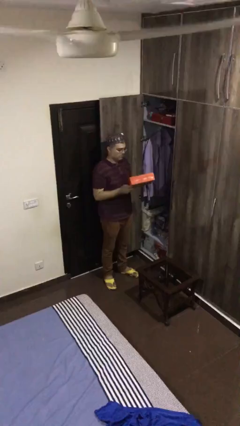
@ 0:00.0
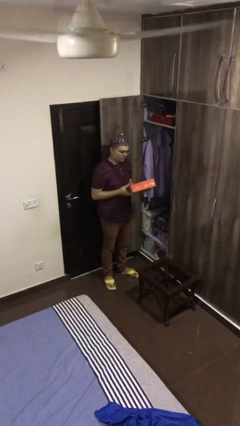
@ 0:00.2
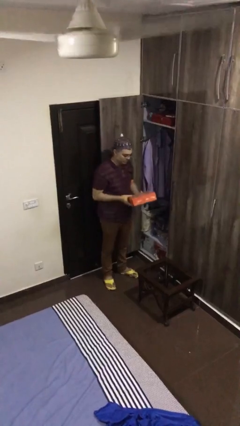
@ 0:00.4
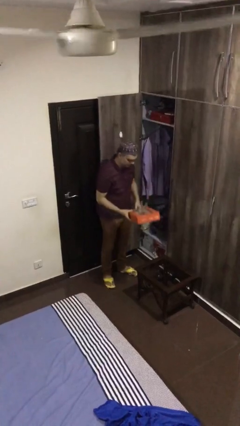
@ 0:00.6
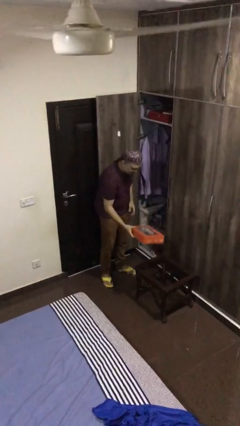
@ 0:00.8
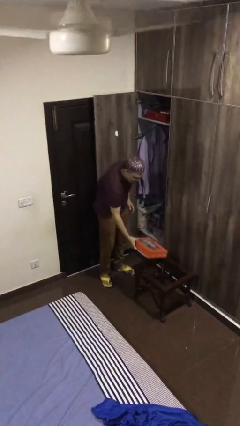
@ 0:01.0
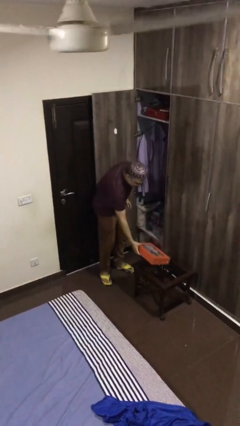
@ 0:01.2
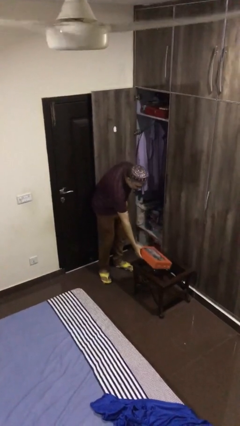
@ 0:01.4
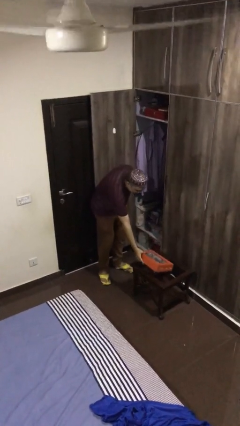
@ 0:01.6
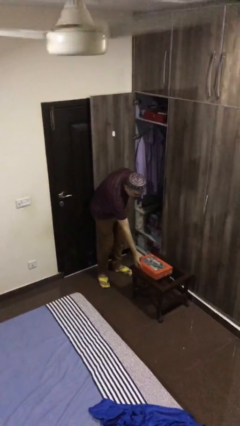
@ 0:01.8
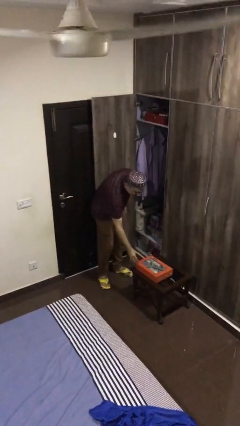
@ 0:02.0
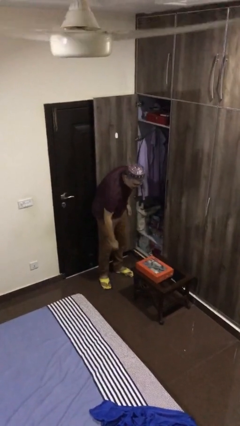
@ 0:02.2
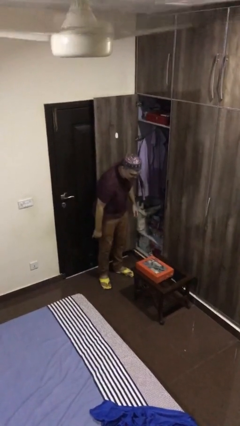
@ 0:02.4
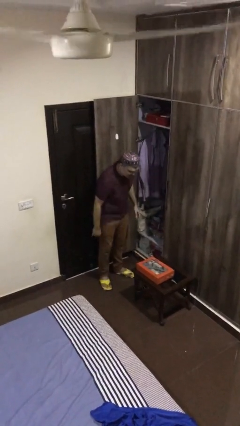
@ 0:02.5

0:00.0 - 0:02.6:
person puts down object on table

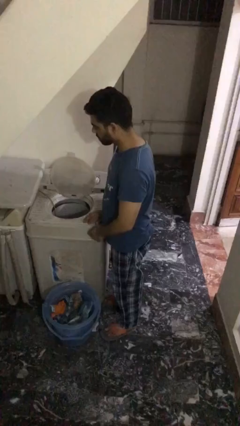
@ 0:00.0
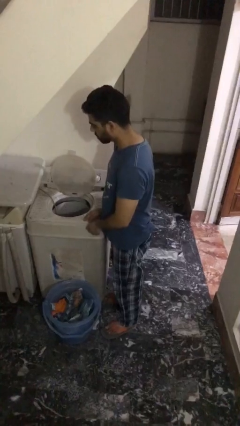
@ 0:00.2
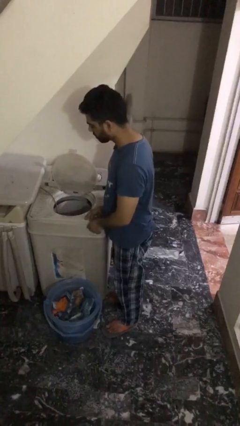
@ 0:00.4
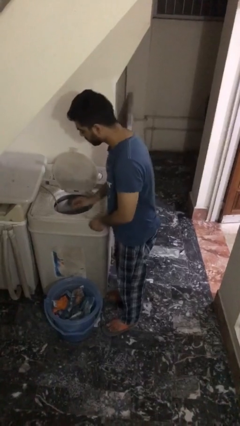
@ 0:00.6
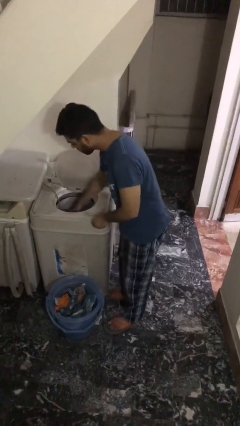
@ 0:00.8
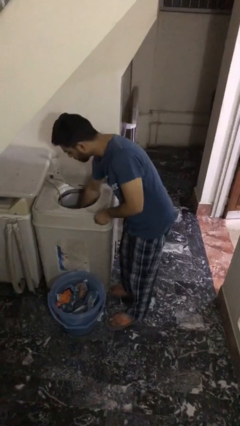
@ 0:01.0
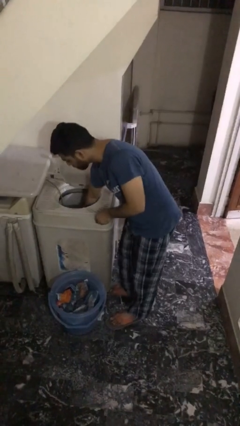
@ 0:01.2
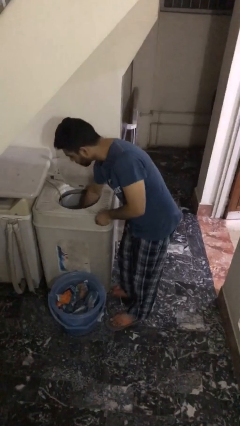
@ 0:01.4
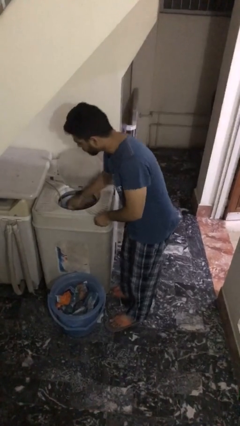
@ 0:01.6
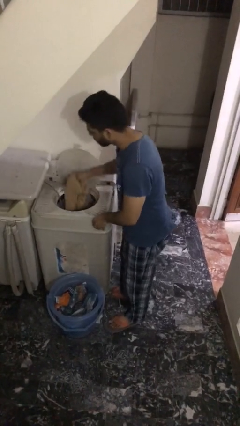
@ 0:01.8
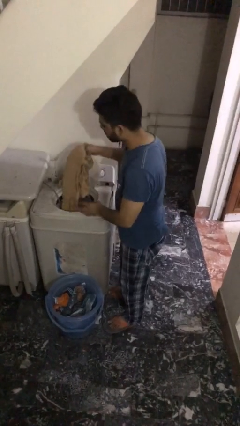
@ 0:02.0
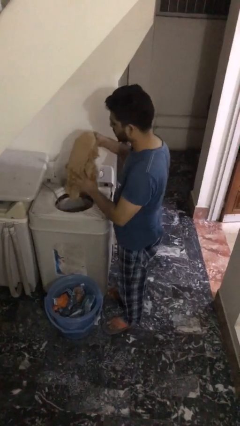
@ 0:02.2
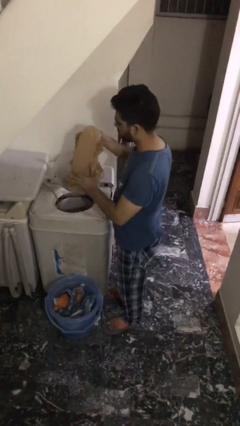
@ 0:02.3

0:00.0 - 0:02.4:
person unloads clotheswasher

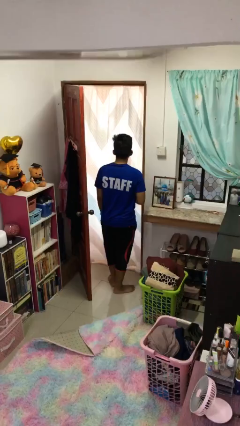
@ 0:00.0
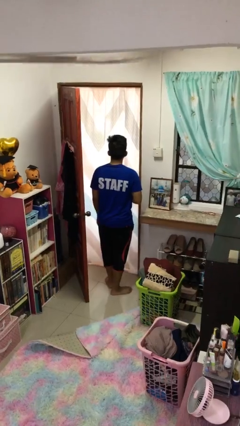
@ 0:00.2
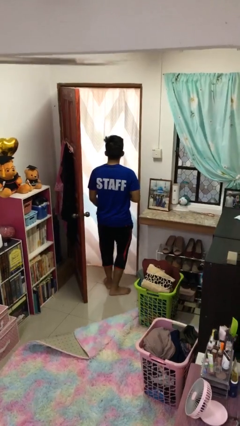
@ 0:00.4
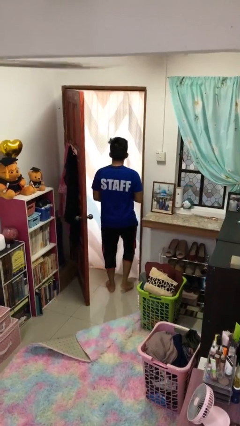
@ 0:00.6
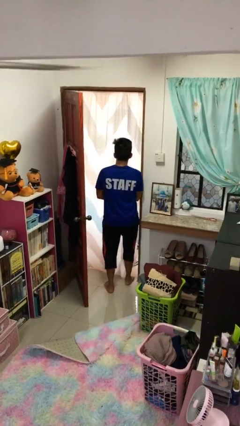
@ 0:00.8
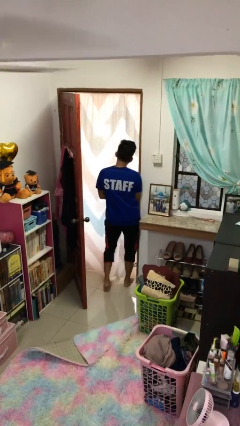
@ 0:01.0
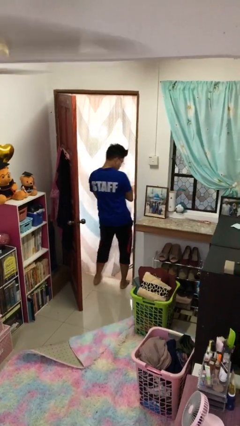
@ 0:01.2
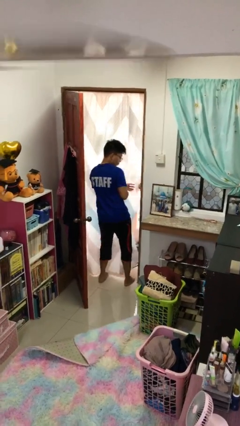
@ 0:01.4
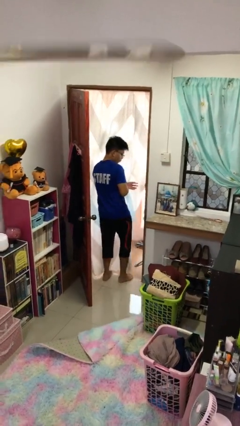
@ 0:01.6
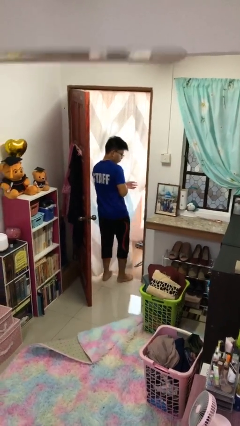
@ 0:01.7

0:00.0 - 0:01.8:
person bumps into wall

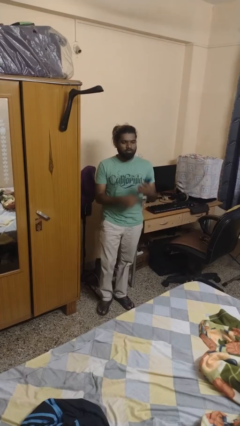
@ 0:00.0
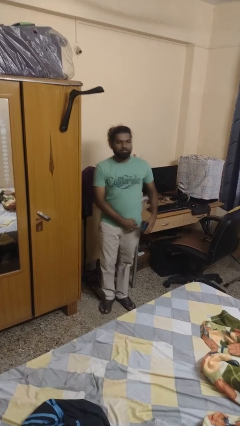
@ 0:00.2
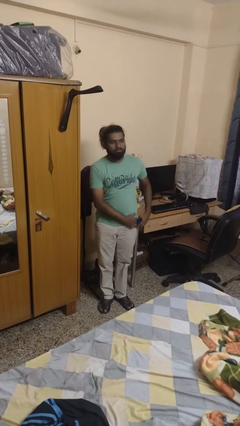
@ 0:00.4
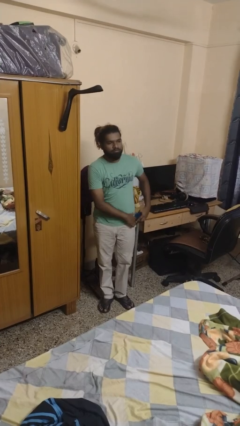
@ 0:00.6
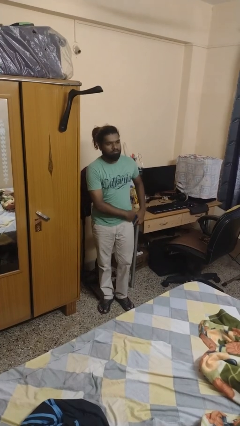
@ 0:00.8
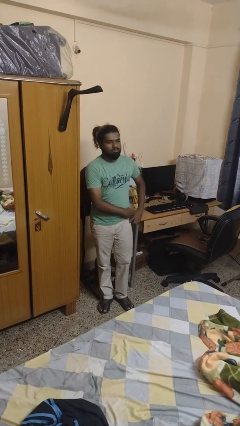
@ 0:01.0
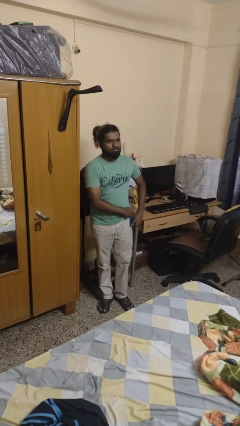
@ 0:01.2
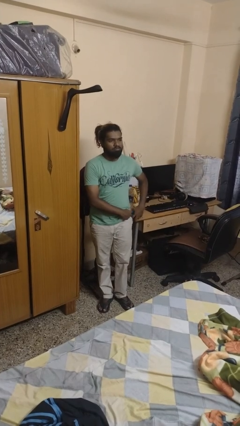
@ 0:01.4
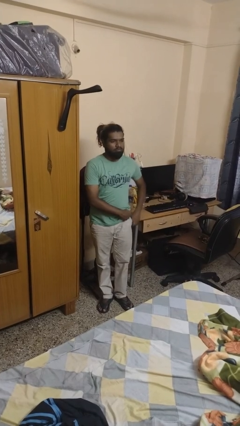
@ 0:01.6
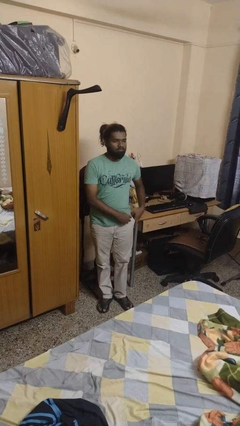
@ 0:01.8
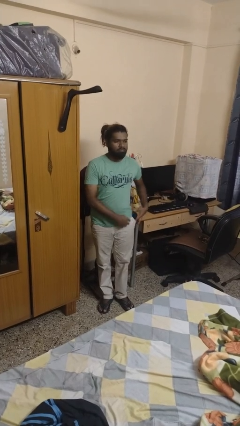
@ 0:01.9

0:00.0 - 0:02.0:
person puts phone into pocket

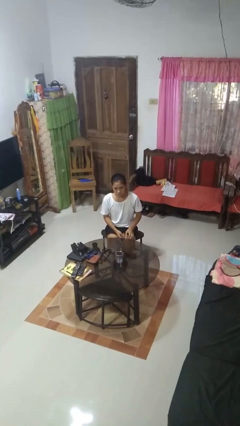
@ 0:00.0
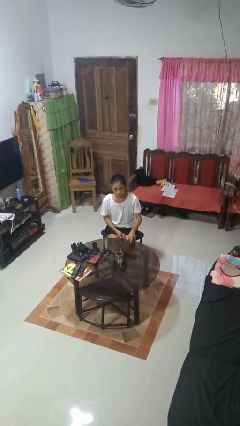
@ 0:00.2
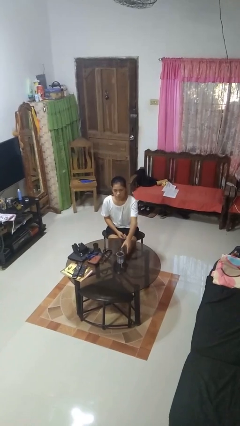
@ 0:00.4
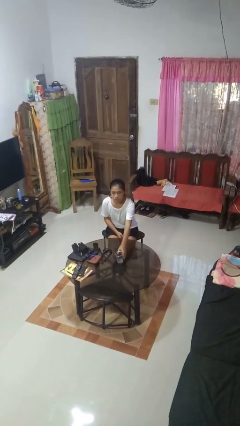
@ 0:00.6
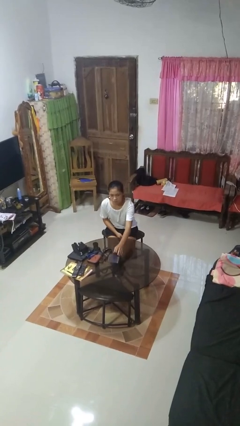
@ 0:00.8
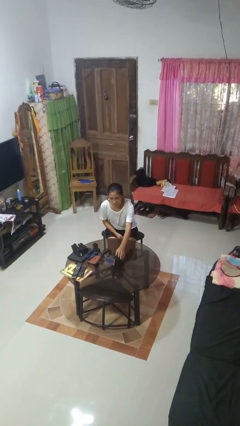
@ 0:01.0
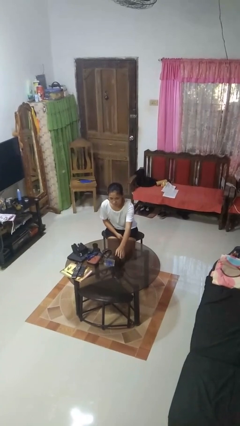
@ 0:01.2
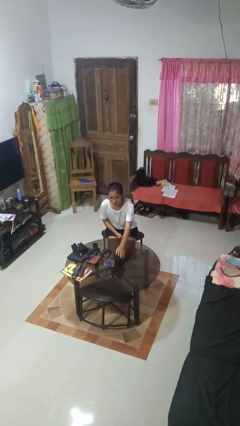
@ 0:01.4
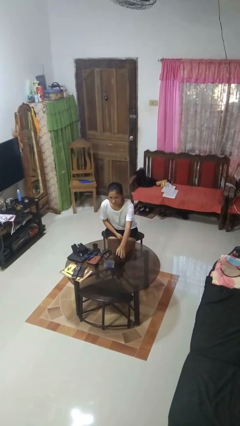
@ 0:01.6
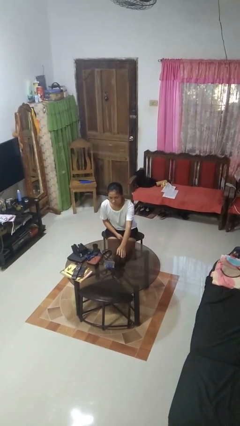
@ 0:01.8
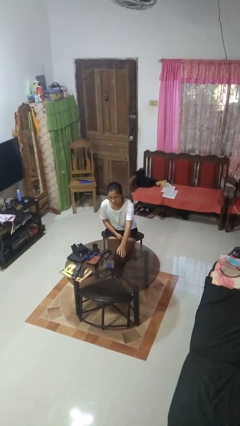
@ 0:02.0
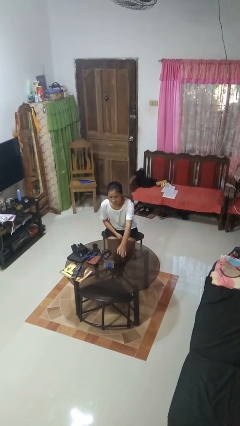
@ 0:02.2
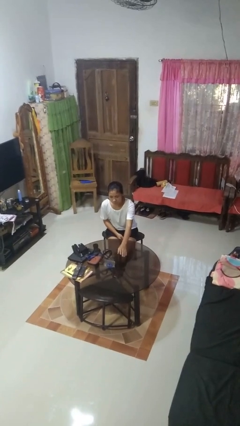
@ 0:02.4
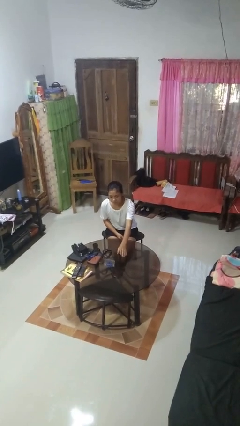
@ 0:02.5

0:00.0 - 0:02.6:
person knocks over glass

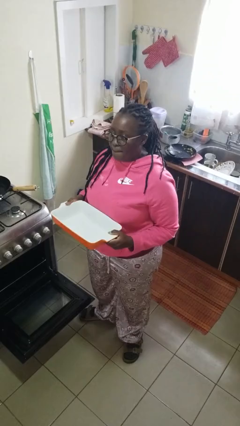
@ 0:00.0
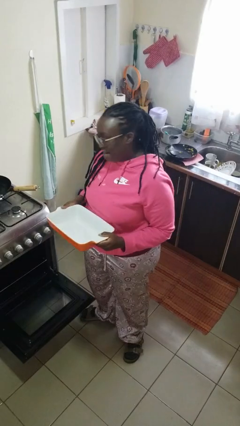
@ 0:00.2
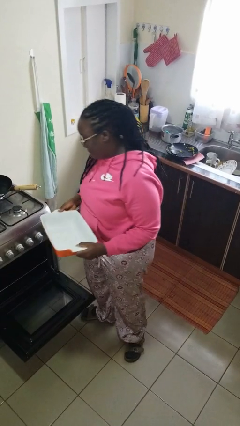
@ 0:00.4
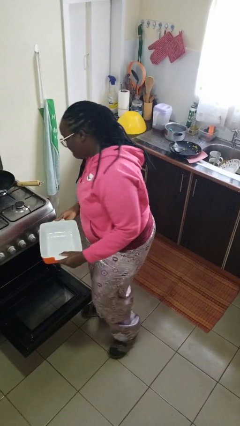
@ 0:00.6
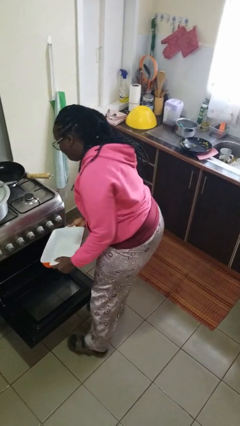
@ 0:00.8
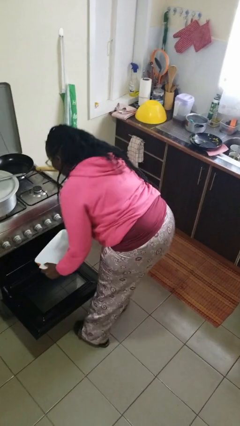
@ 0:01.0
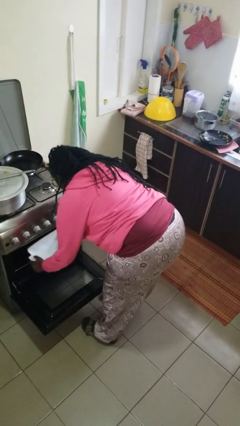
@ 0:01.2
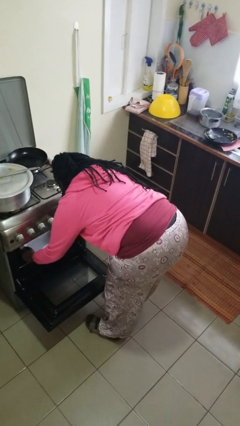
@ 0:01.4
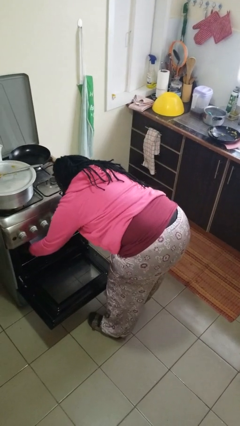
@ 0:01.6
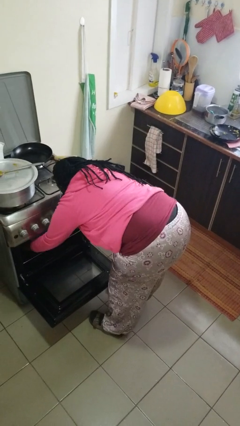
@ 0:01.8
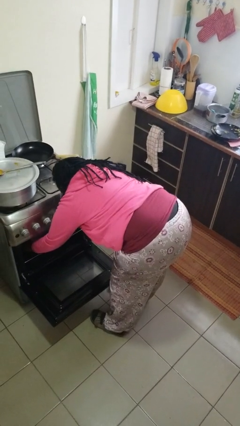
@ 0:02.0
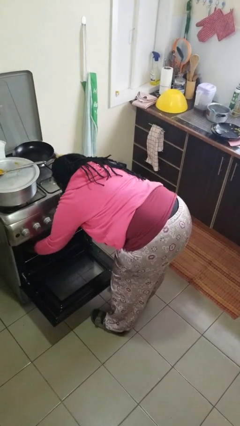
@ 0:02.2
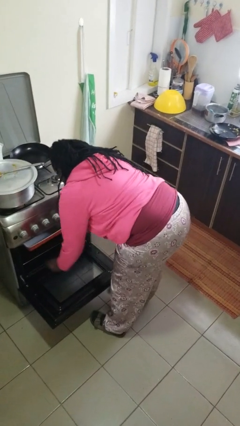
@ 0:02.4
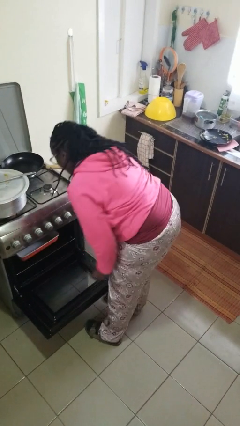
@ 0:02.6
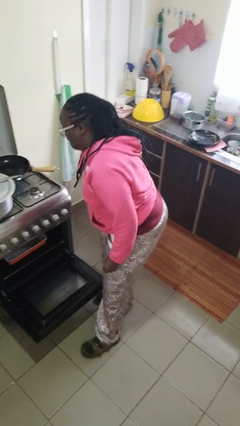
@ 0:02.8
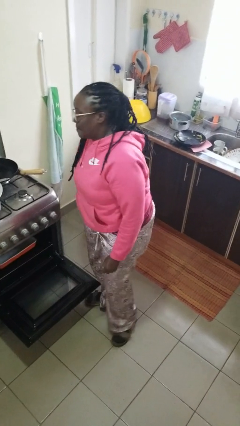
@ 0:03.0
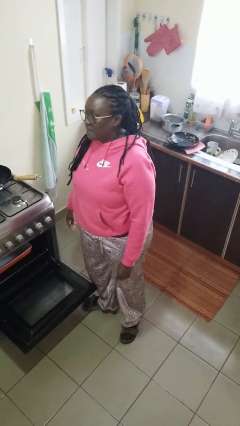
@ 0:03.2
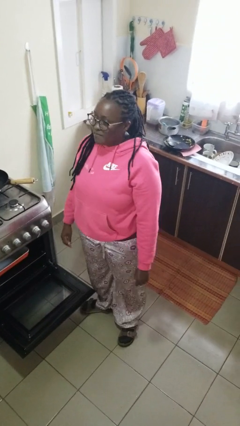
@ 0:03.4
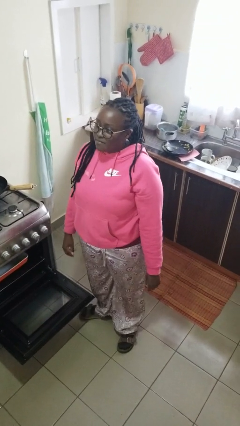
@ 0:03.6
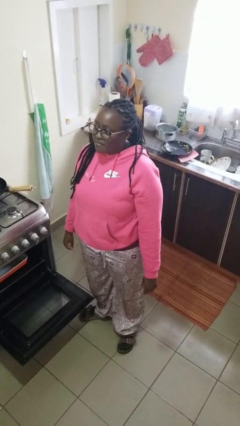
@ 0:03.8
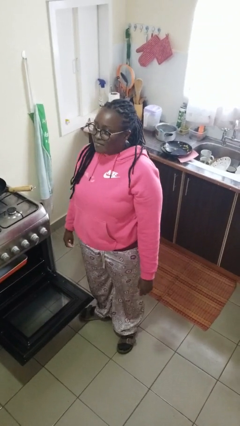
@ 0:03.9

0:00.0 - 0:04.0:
person puts object into oven

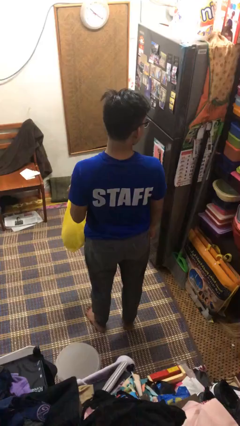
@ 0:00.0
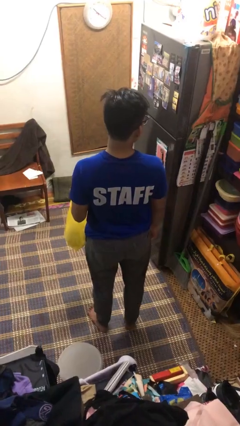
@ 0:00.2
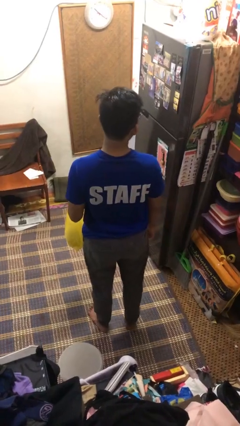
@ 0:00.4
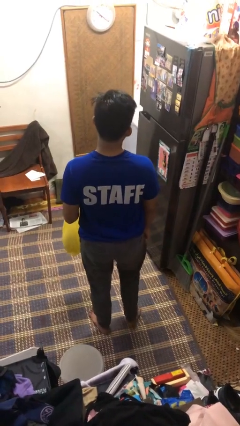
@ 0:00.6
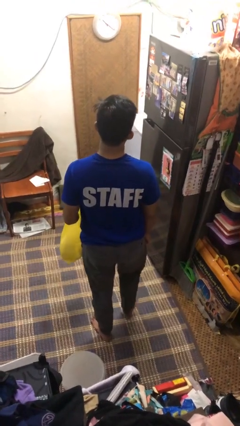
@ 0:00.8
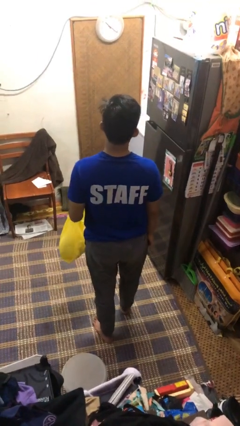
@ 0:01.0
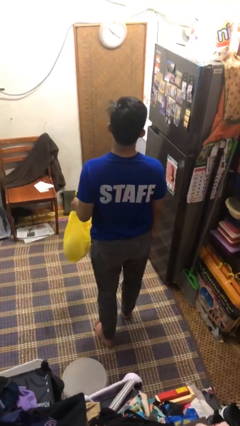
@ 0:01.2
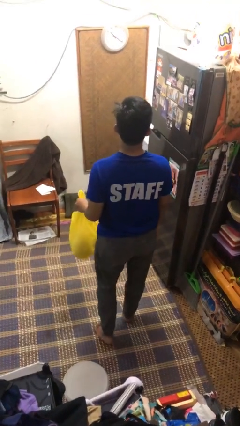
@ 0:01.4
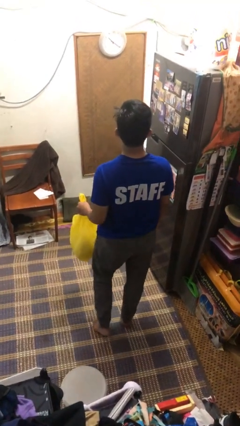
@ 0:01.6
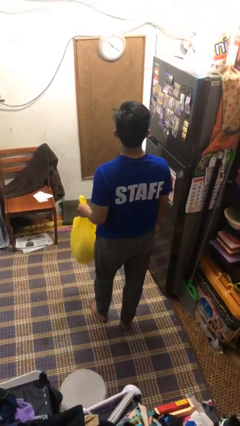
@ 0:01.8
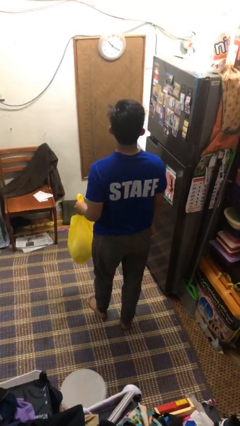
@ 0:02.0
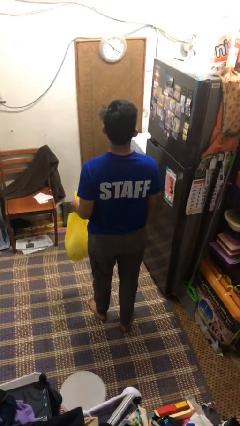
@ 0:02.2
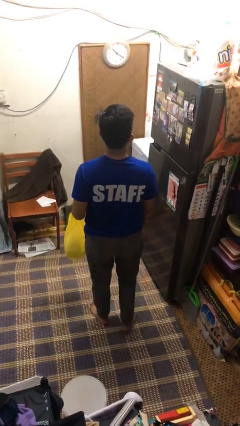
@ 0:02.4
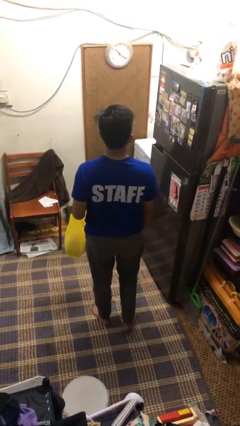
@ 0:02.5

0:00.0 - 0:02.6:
person carries groceries
